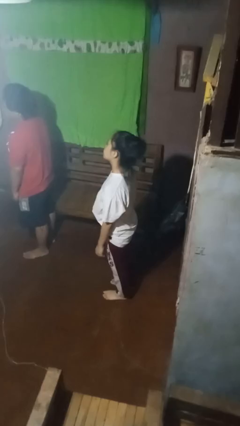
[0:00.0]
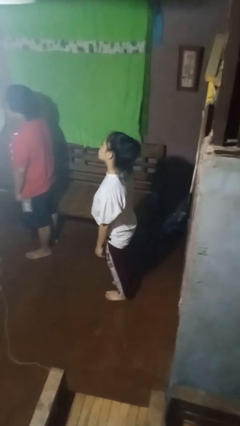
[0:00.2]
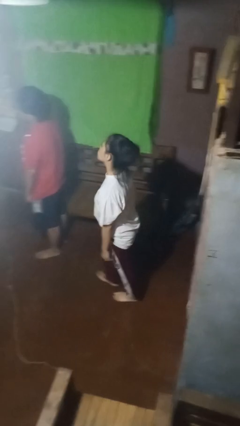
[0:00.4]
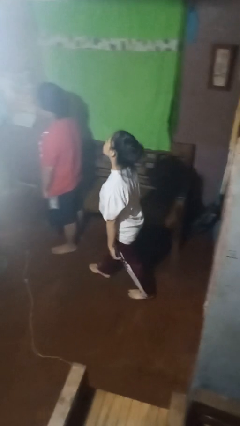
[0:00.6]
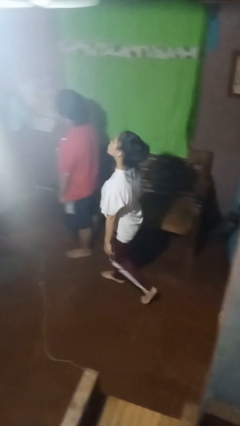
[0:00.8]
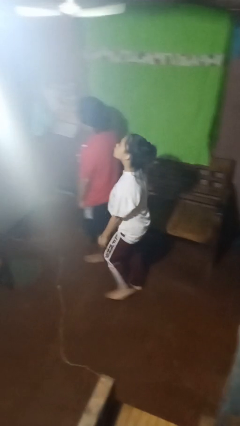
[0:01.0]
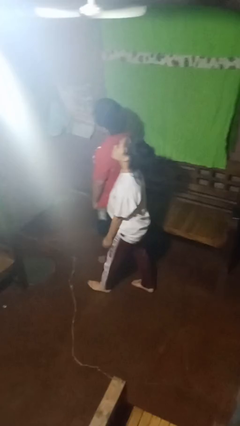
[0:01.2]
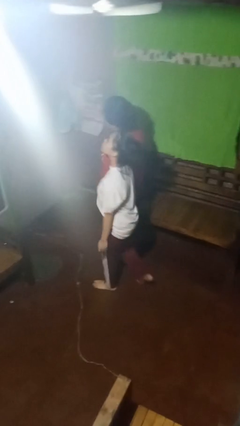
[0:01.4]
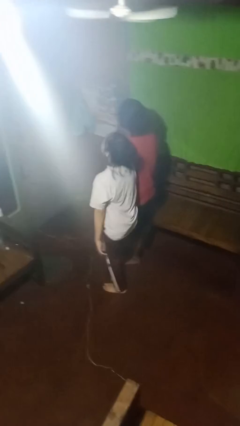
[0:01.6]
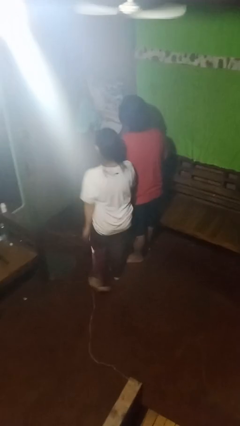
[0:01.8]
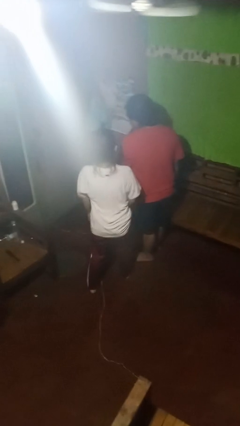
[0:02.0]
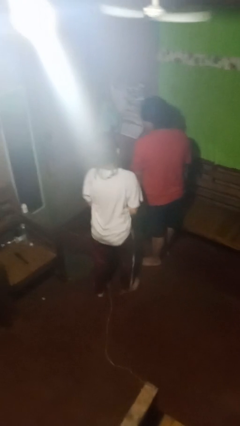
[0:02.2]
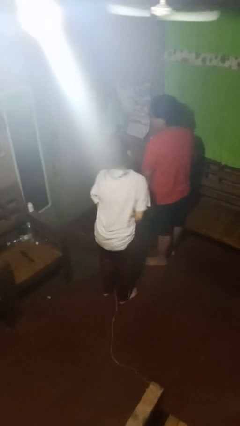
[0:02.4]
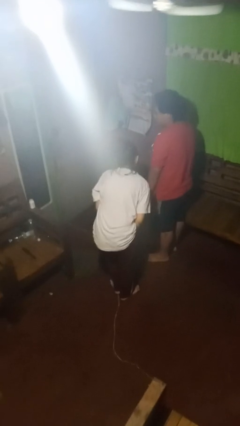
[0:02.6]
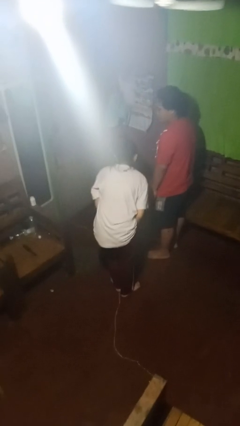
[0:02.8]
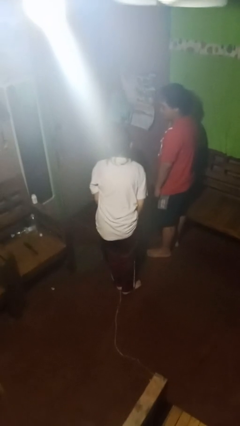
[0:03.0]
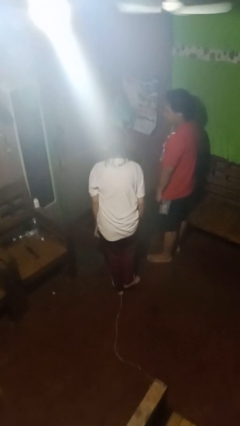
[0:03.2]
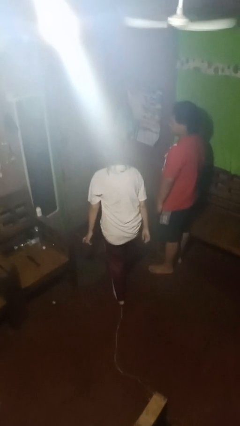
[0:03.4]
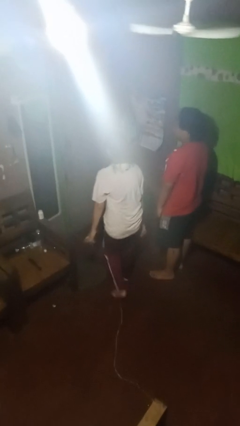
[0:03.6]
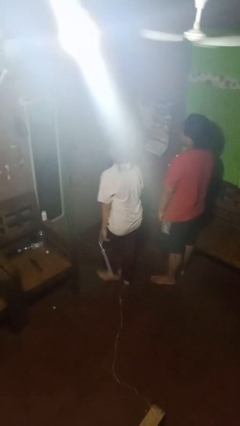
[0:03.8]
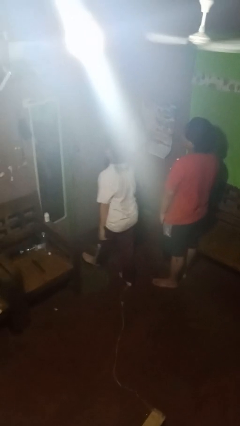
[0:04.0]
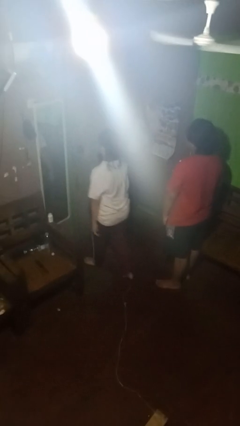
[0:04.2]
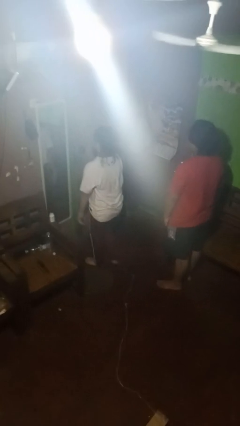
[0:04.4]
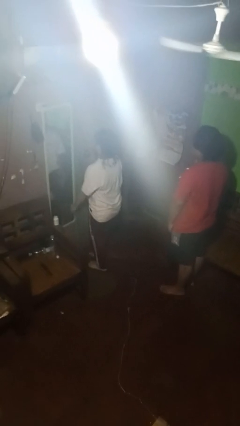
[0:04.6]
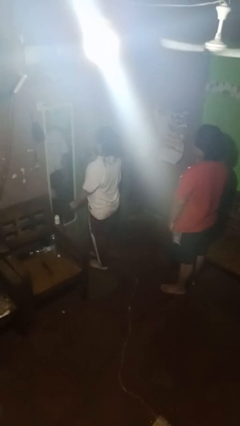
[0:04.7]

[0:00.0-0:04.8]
person bumps into person

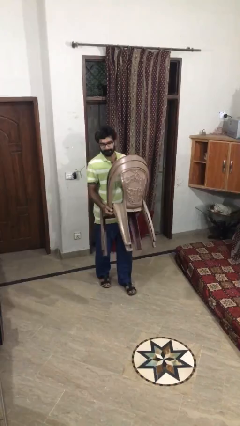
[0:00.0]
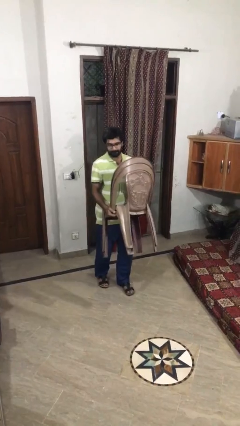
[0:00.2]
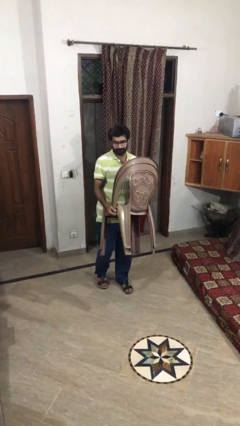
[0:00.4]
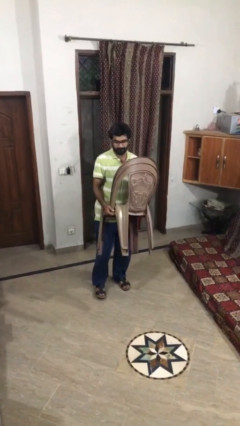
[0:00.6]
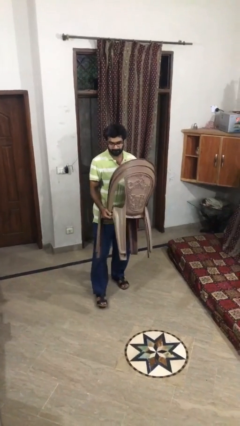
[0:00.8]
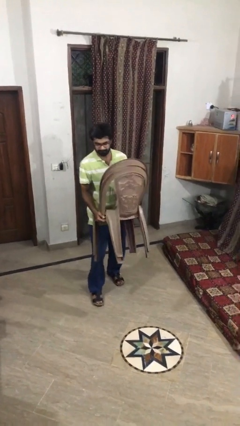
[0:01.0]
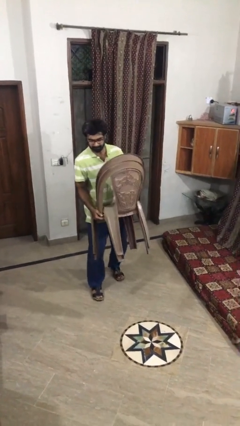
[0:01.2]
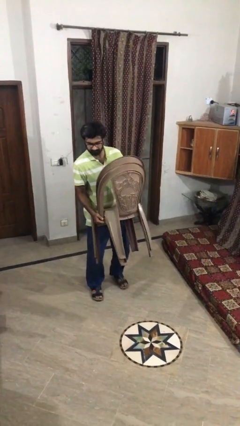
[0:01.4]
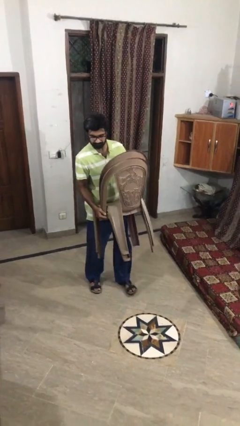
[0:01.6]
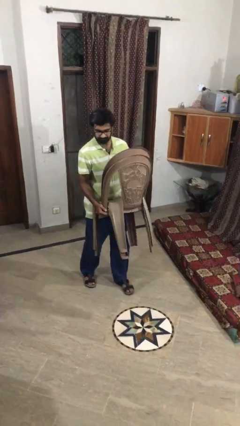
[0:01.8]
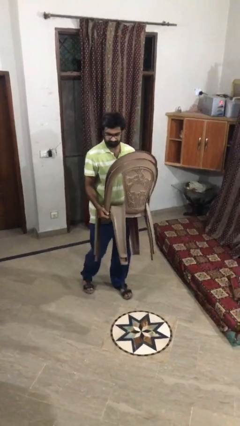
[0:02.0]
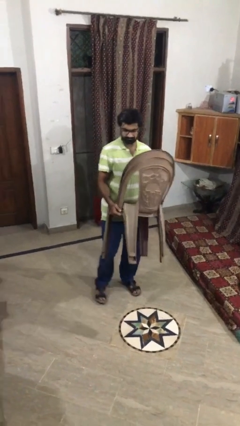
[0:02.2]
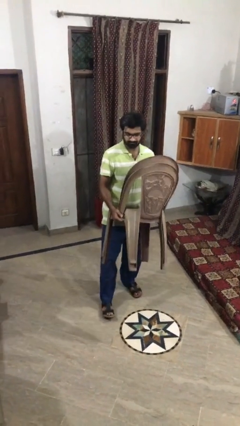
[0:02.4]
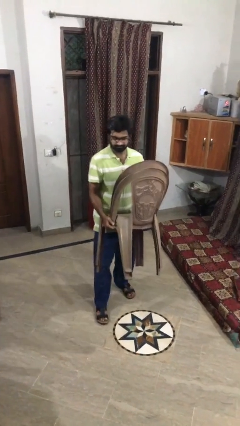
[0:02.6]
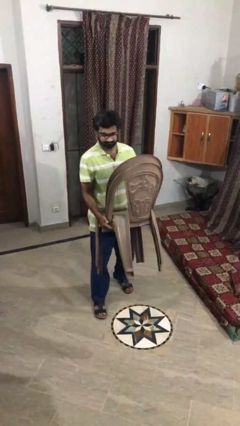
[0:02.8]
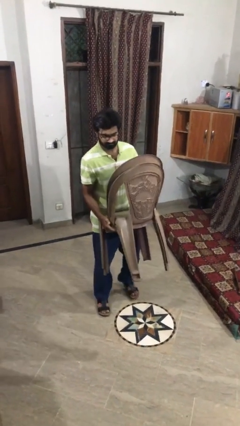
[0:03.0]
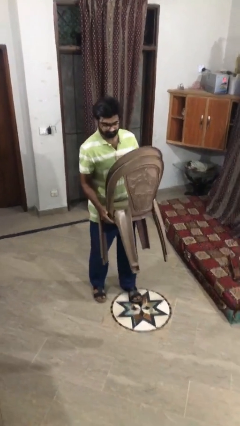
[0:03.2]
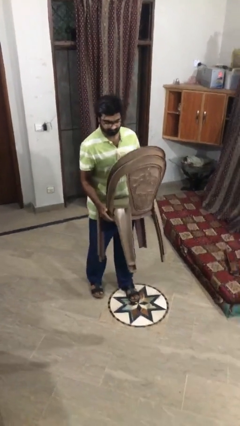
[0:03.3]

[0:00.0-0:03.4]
person carries heavy object

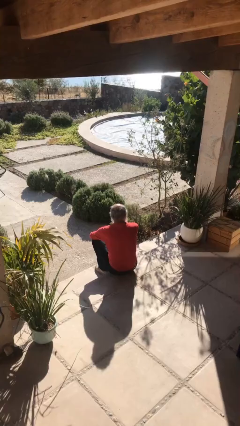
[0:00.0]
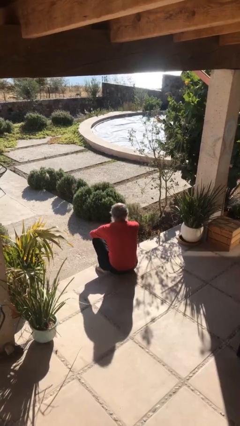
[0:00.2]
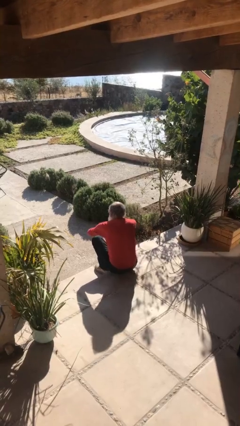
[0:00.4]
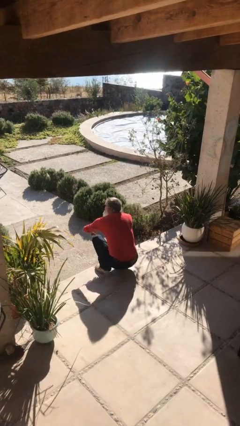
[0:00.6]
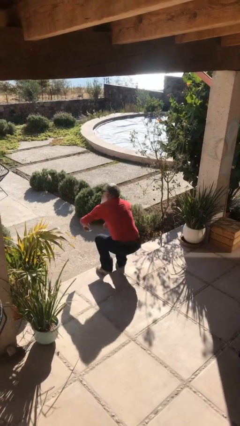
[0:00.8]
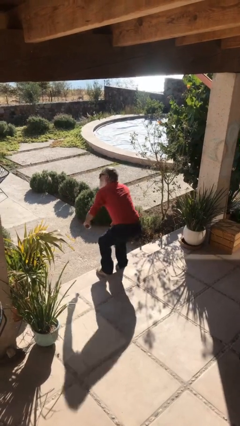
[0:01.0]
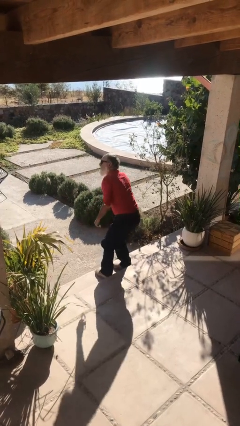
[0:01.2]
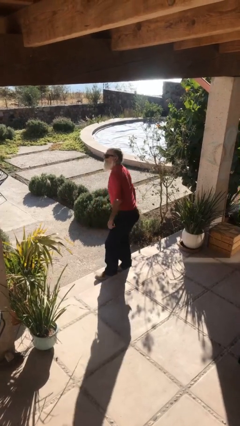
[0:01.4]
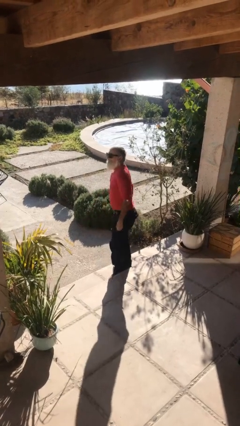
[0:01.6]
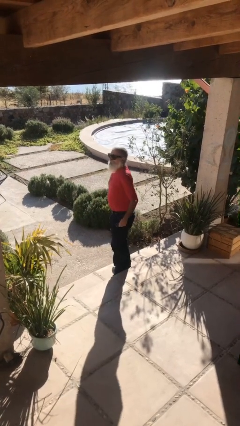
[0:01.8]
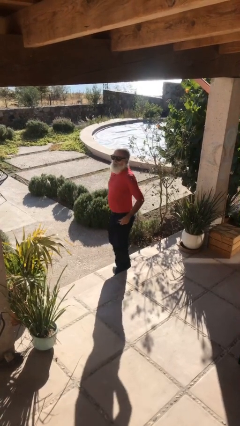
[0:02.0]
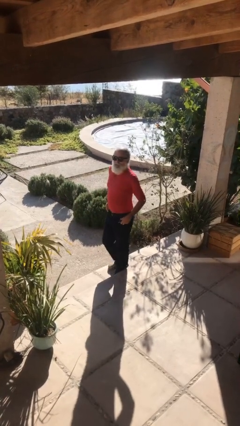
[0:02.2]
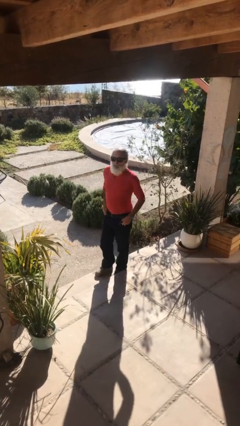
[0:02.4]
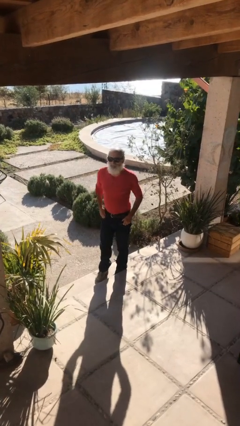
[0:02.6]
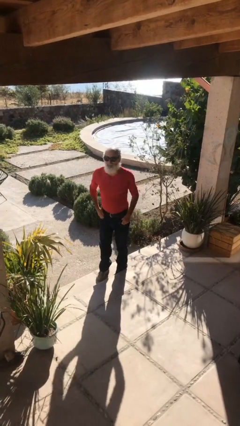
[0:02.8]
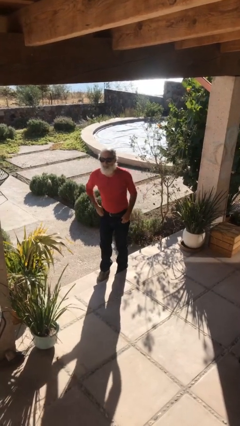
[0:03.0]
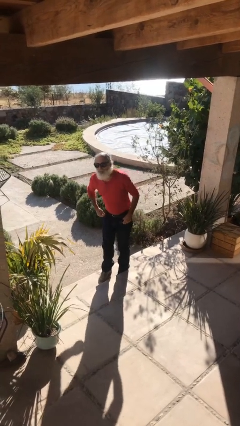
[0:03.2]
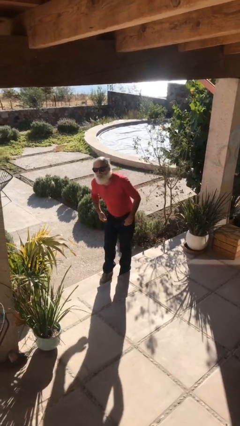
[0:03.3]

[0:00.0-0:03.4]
person stands up

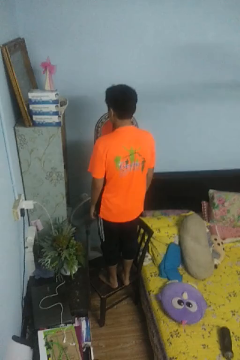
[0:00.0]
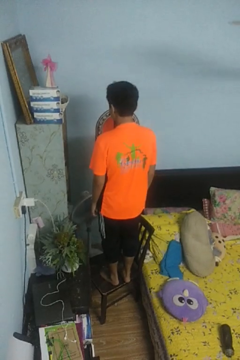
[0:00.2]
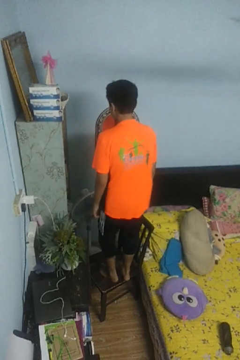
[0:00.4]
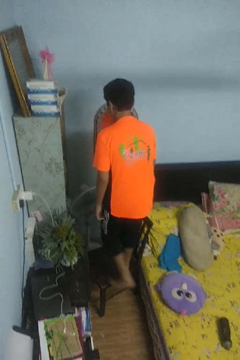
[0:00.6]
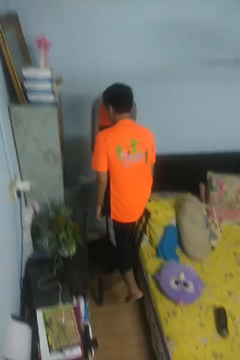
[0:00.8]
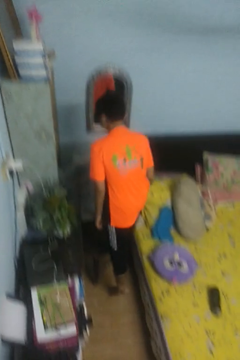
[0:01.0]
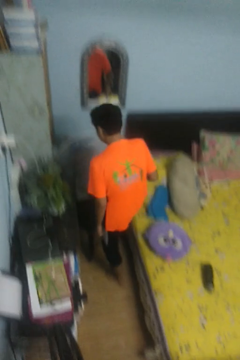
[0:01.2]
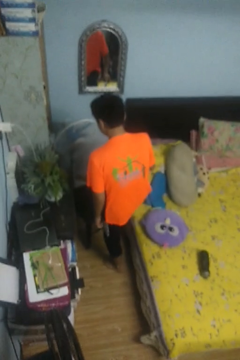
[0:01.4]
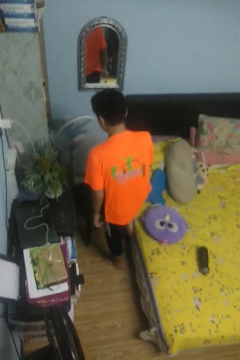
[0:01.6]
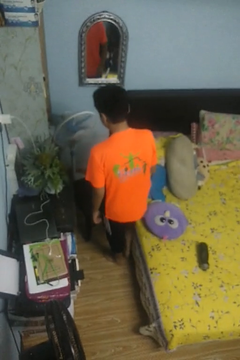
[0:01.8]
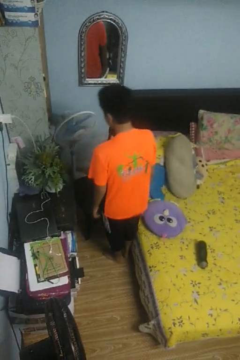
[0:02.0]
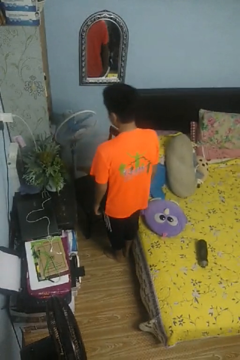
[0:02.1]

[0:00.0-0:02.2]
person climbs off chair

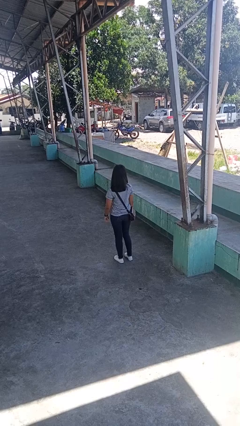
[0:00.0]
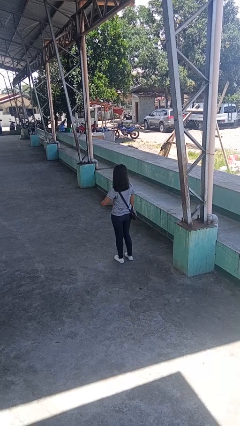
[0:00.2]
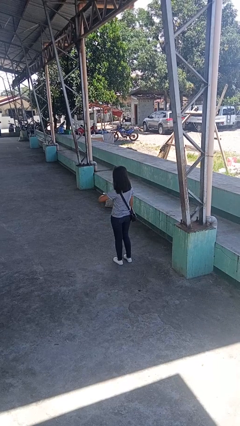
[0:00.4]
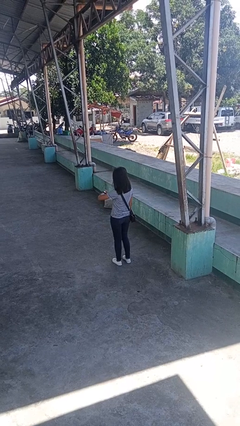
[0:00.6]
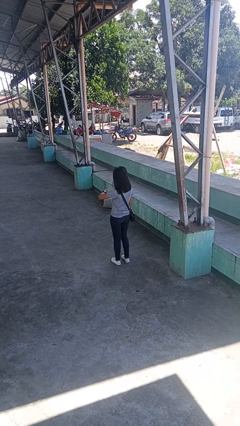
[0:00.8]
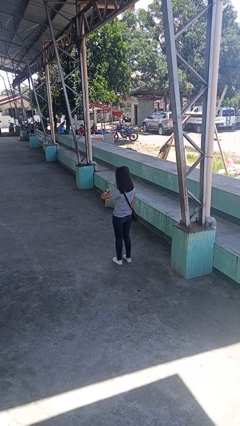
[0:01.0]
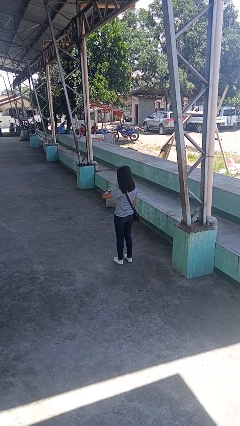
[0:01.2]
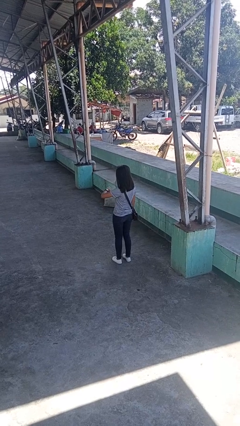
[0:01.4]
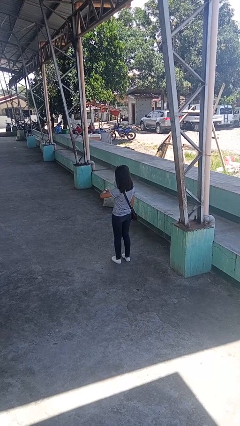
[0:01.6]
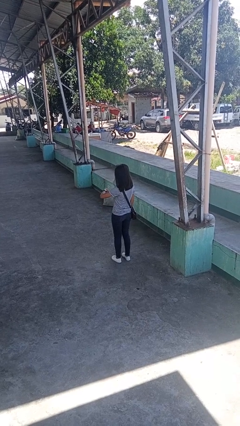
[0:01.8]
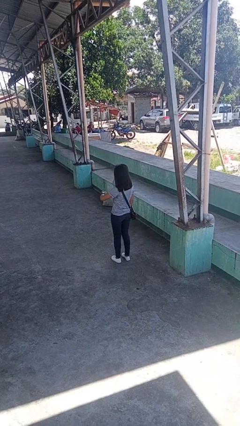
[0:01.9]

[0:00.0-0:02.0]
person looks at wristwatch

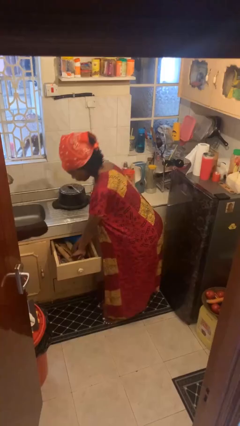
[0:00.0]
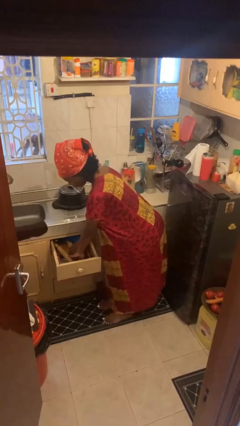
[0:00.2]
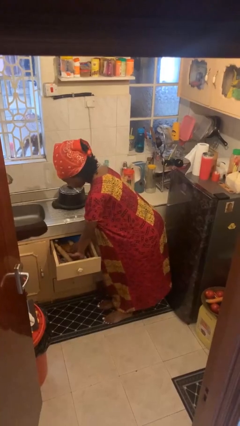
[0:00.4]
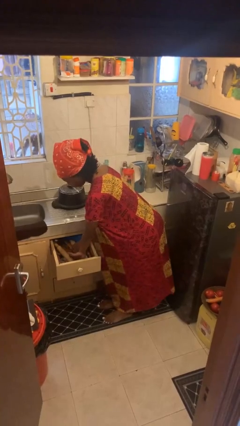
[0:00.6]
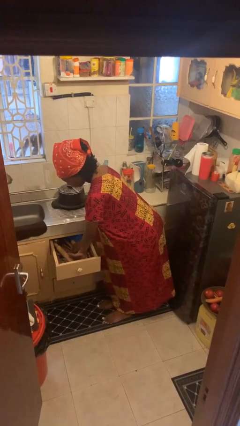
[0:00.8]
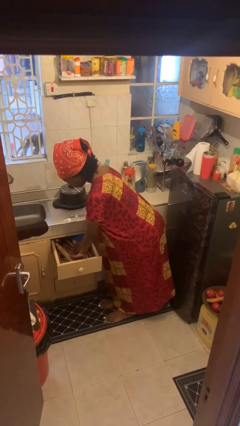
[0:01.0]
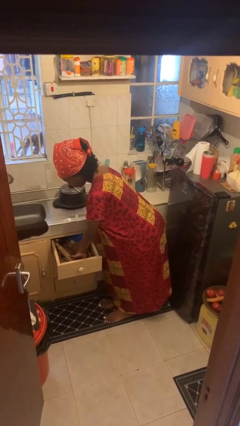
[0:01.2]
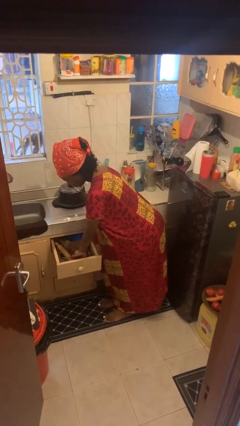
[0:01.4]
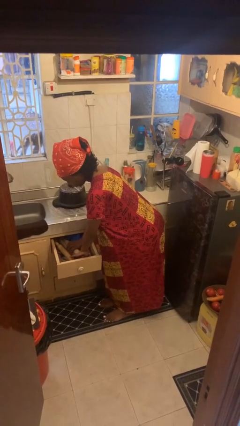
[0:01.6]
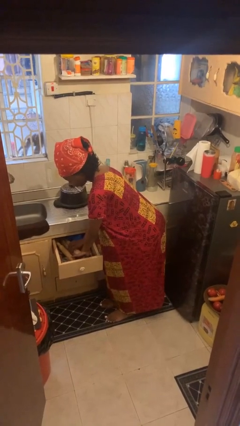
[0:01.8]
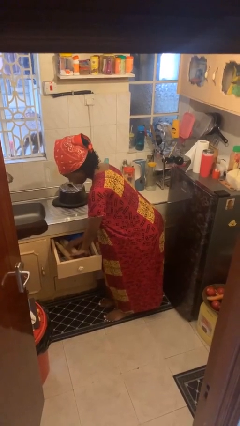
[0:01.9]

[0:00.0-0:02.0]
person searches in kitchen drawer

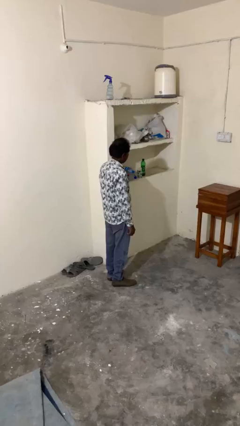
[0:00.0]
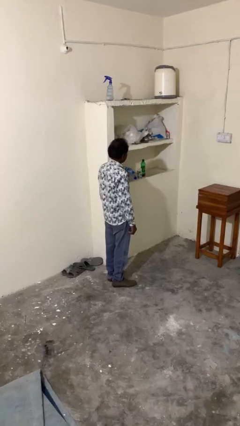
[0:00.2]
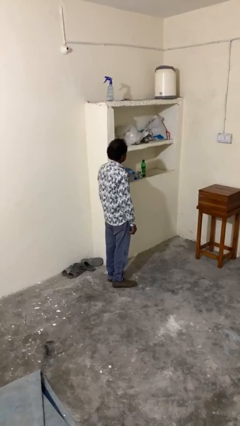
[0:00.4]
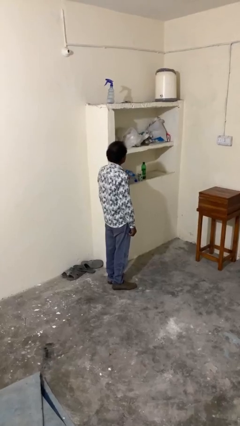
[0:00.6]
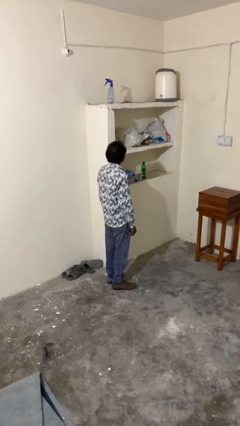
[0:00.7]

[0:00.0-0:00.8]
person picks up object from shelf
